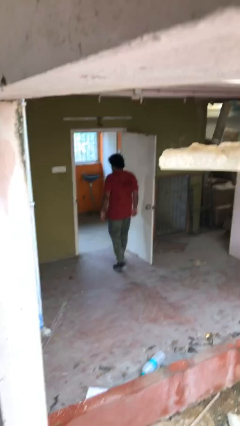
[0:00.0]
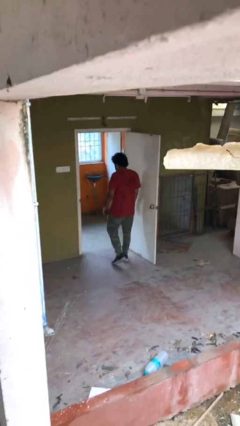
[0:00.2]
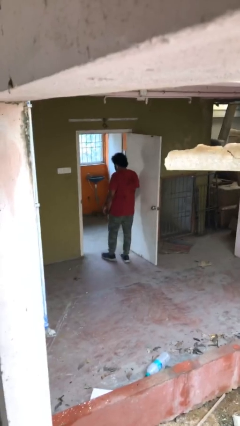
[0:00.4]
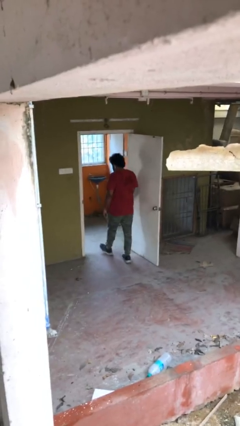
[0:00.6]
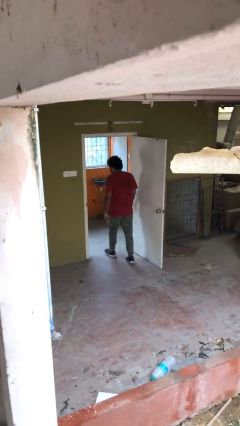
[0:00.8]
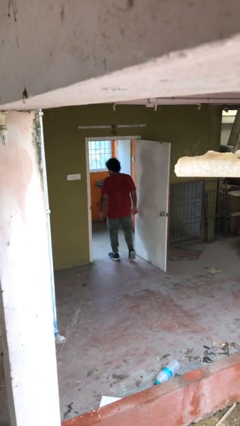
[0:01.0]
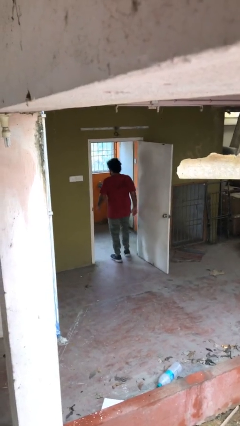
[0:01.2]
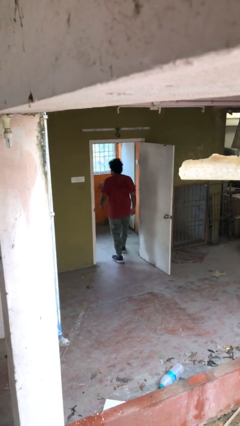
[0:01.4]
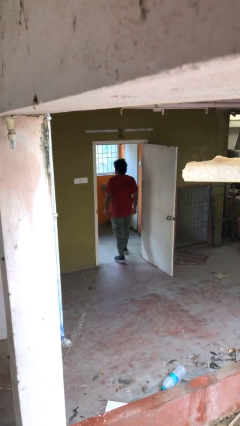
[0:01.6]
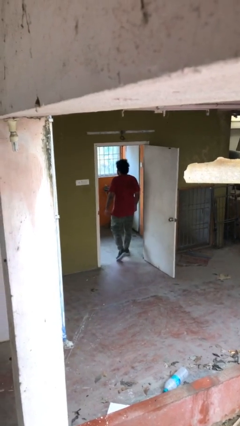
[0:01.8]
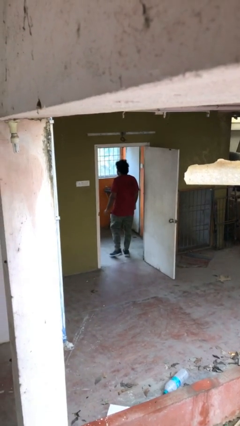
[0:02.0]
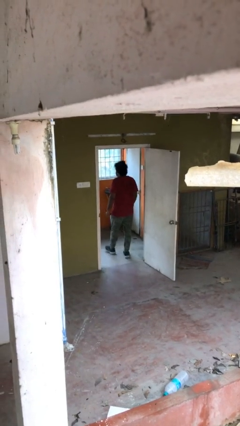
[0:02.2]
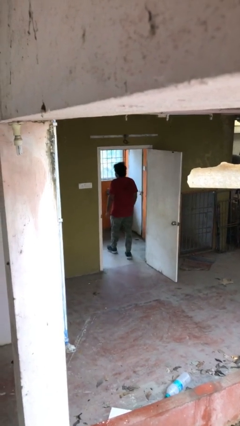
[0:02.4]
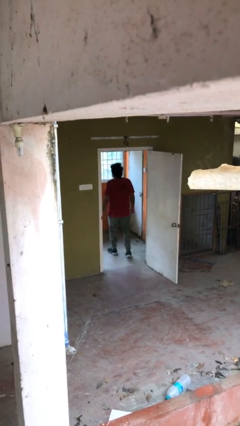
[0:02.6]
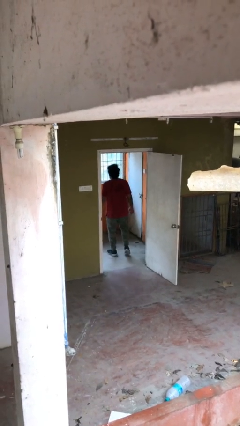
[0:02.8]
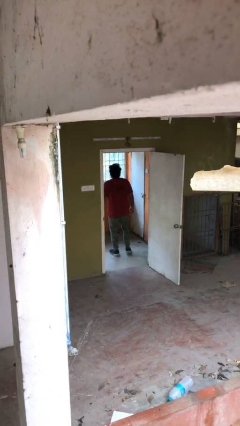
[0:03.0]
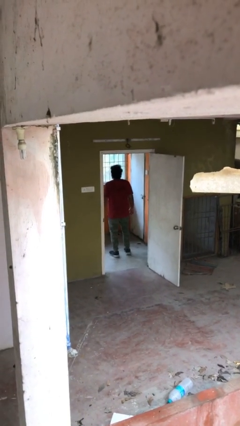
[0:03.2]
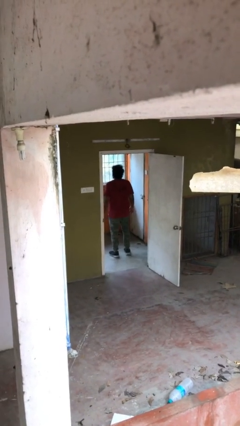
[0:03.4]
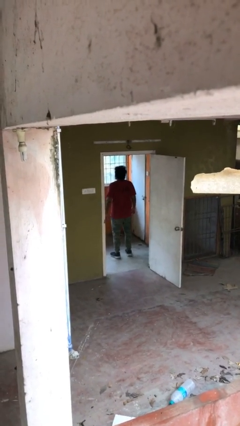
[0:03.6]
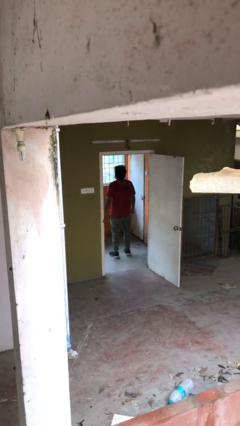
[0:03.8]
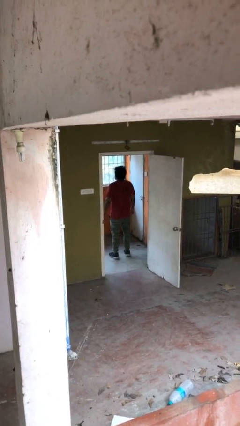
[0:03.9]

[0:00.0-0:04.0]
person exits scene through structure

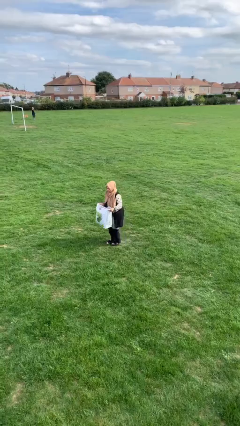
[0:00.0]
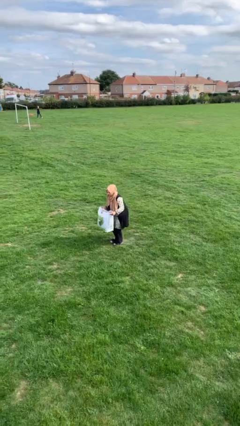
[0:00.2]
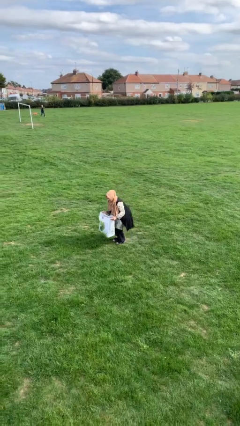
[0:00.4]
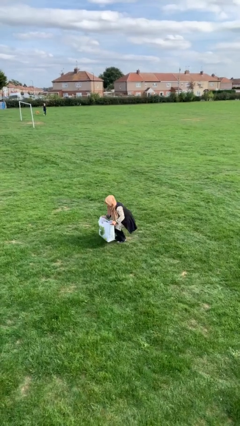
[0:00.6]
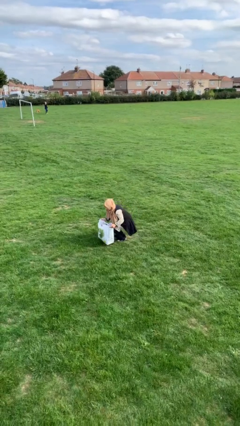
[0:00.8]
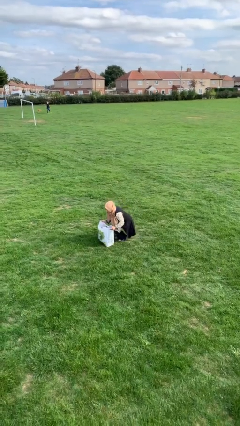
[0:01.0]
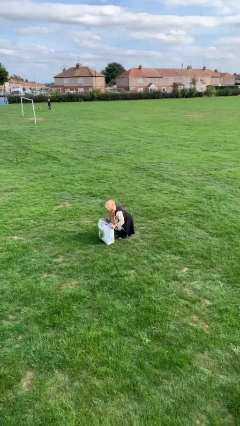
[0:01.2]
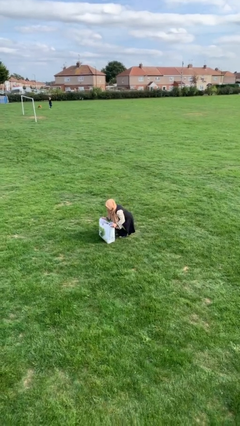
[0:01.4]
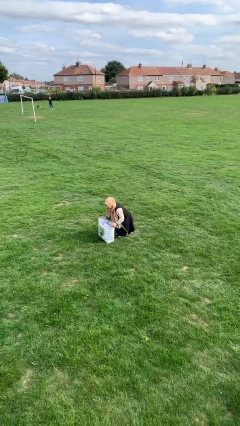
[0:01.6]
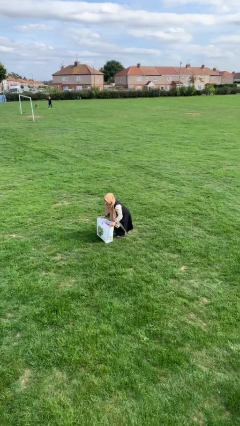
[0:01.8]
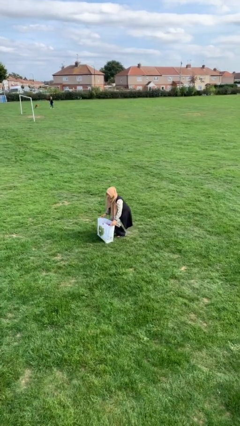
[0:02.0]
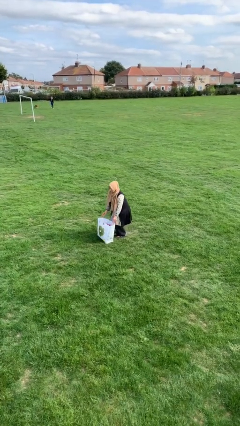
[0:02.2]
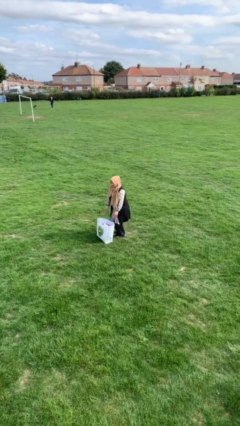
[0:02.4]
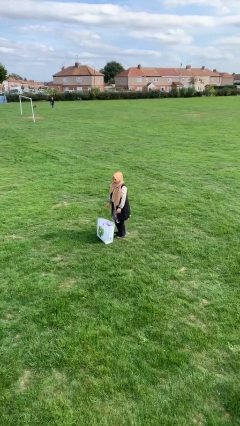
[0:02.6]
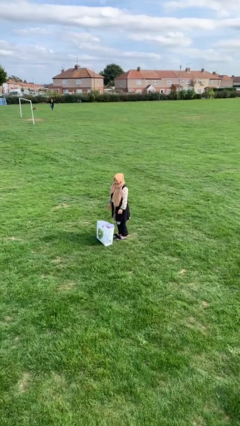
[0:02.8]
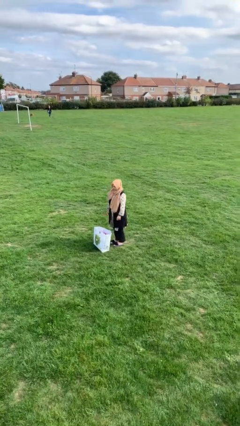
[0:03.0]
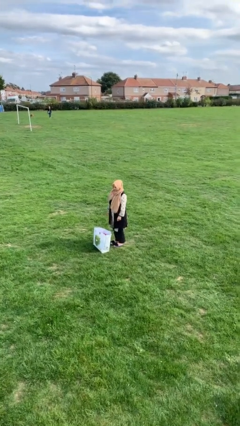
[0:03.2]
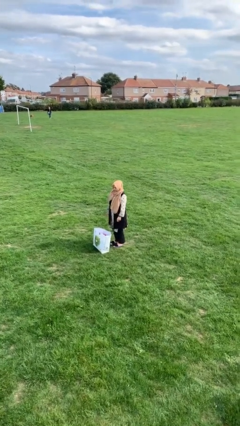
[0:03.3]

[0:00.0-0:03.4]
person puts down object on floor

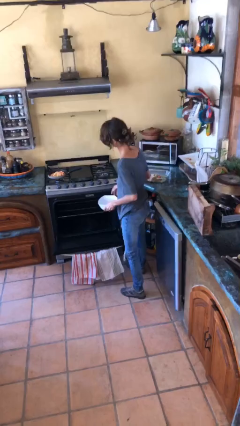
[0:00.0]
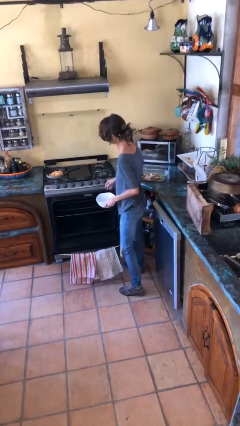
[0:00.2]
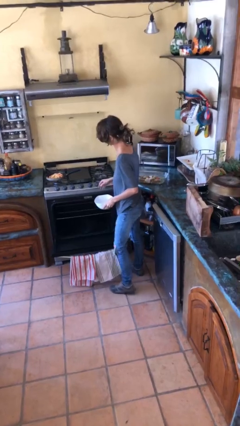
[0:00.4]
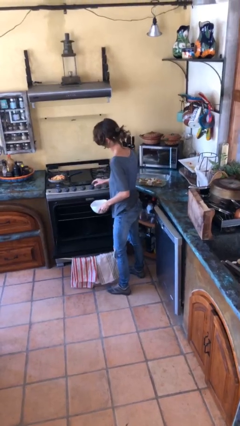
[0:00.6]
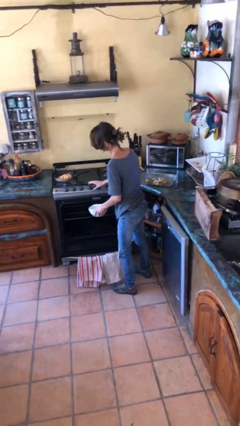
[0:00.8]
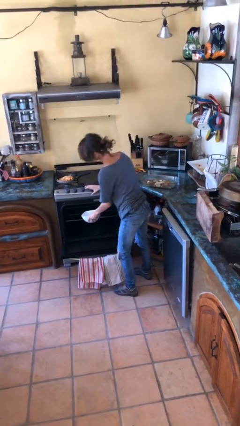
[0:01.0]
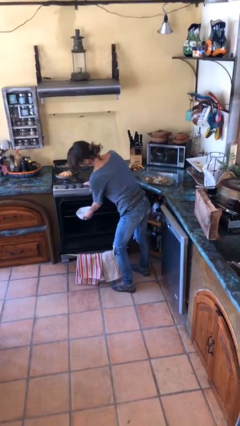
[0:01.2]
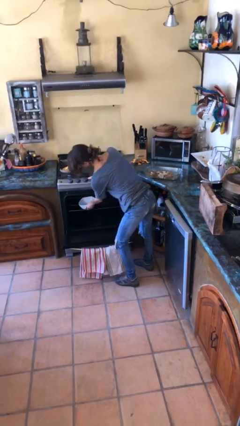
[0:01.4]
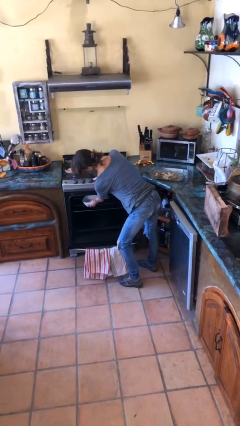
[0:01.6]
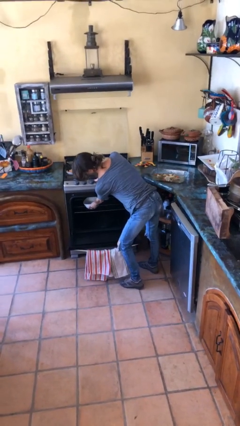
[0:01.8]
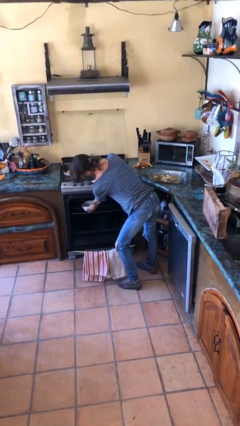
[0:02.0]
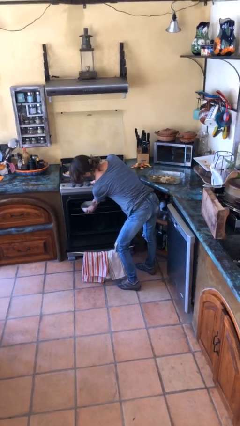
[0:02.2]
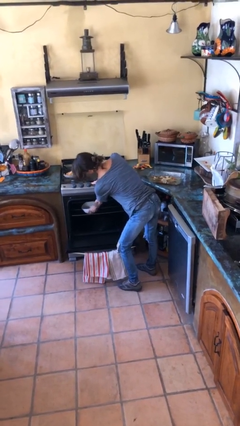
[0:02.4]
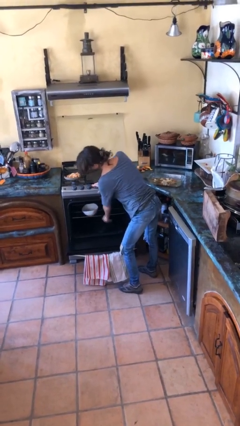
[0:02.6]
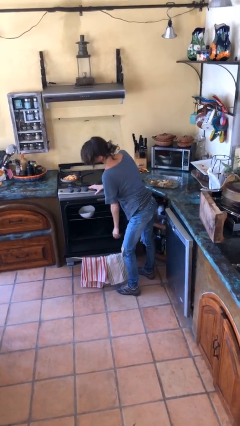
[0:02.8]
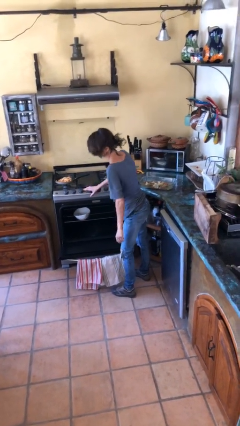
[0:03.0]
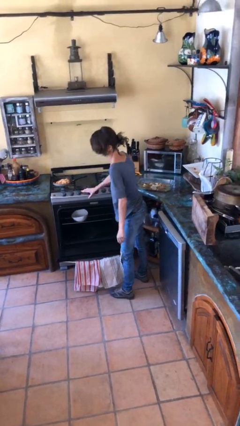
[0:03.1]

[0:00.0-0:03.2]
person puts object into oven

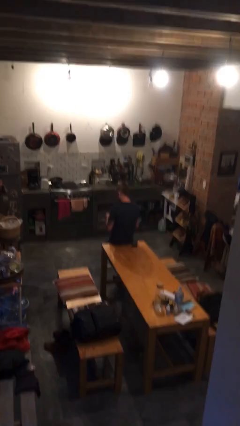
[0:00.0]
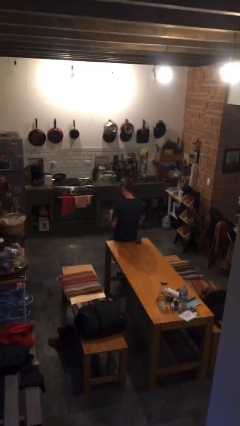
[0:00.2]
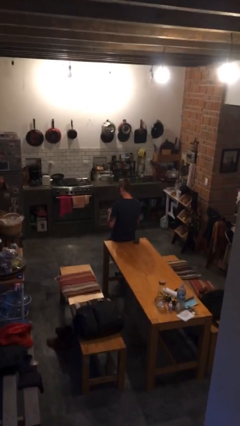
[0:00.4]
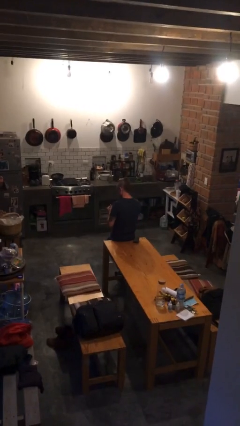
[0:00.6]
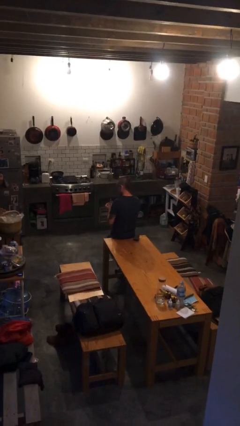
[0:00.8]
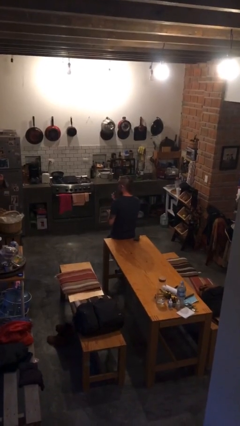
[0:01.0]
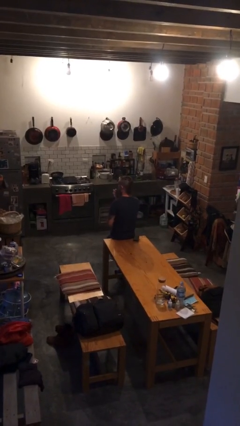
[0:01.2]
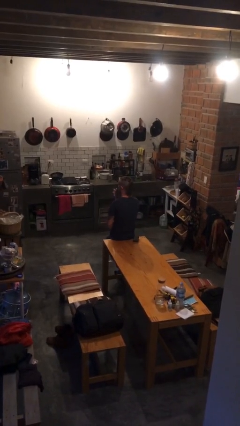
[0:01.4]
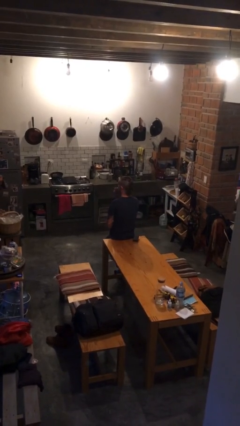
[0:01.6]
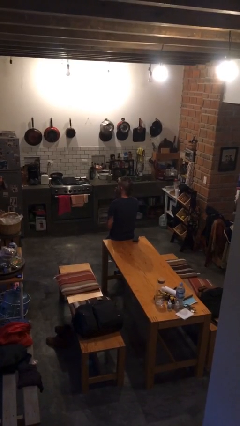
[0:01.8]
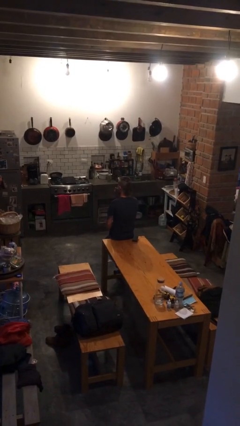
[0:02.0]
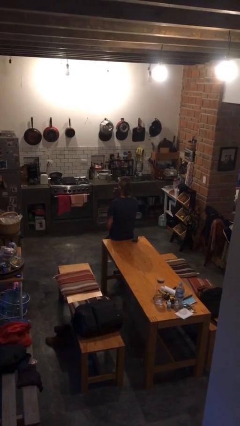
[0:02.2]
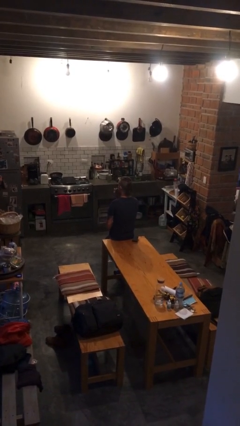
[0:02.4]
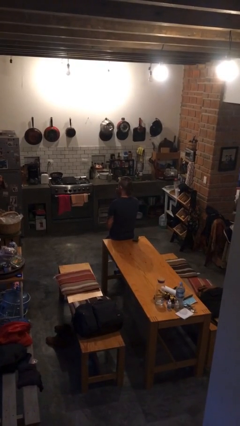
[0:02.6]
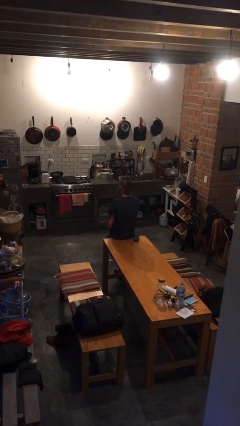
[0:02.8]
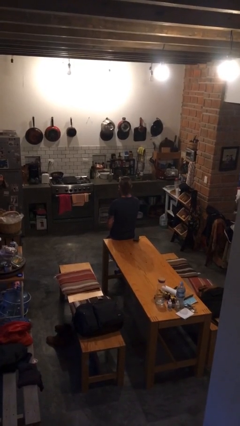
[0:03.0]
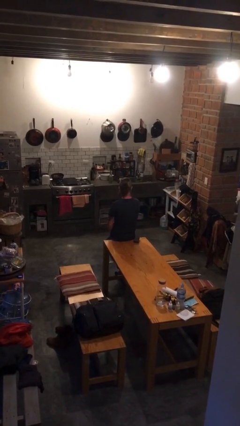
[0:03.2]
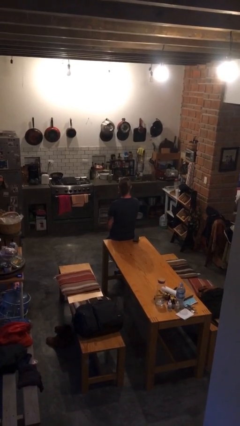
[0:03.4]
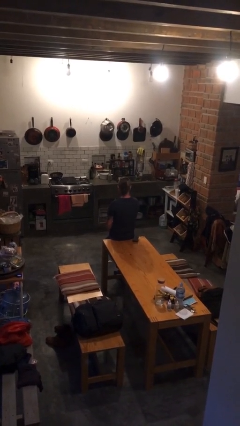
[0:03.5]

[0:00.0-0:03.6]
person applies lip makeup

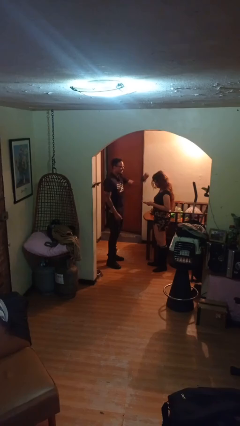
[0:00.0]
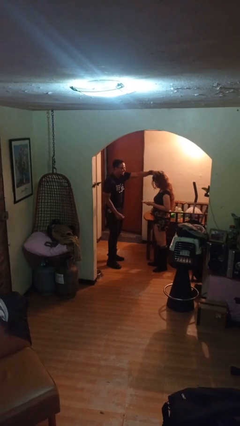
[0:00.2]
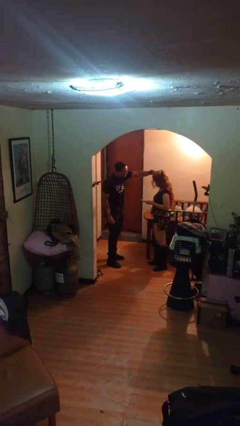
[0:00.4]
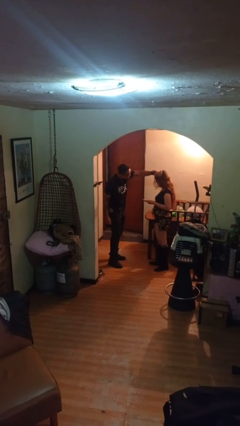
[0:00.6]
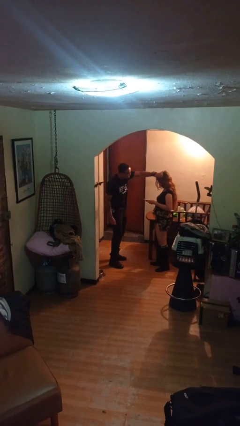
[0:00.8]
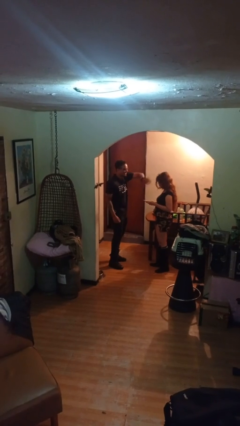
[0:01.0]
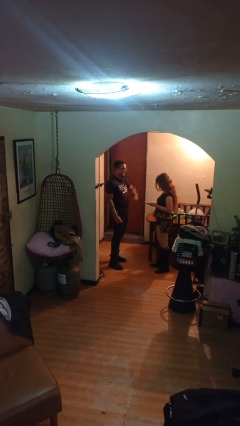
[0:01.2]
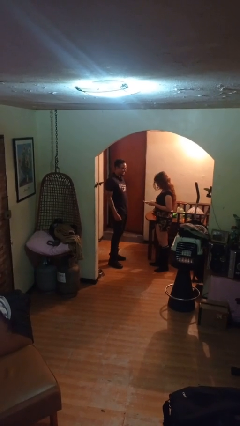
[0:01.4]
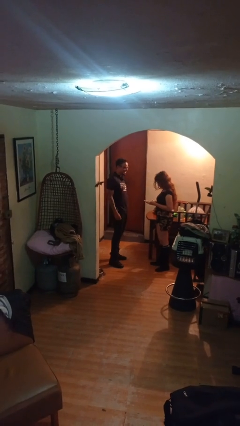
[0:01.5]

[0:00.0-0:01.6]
person picks up object from table

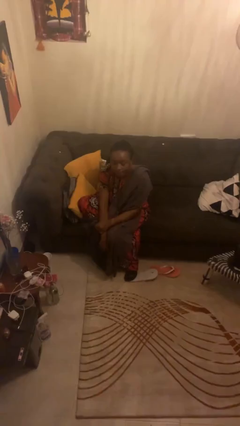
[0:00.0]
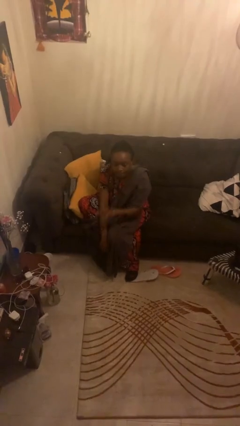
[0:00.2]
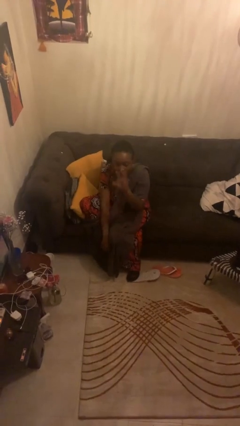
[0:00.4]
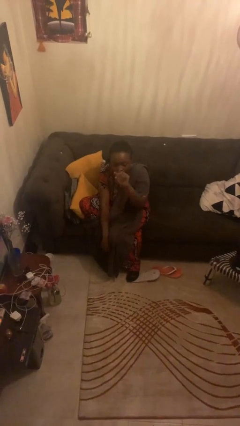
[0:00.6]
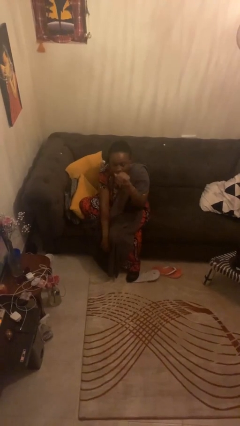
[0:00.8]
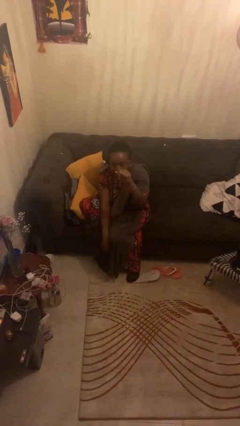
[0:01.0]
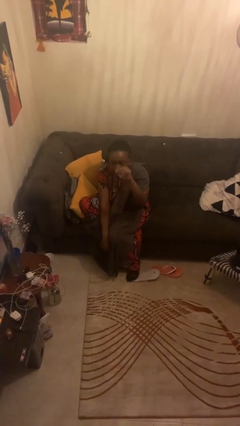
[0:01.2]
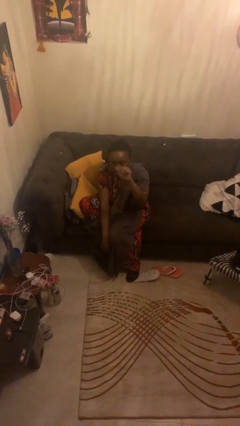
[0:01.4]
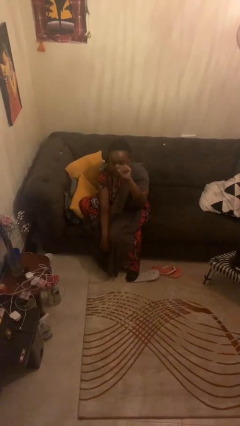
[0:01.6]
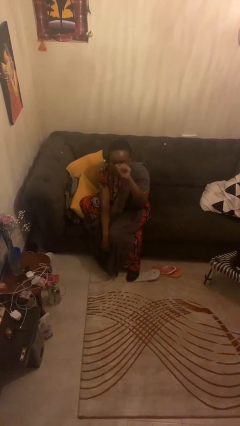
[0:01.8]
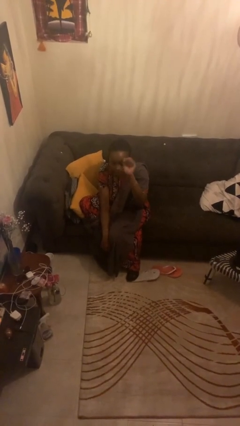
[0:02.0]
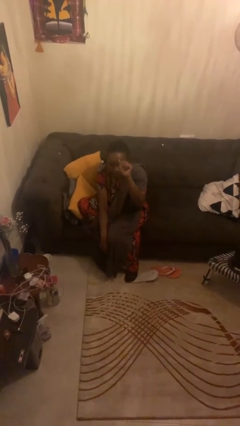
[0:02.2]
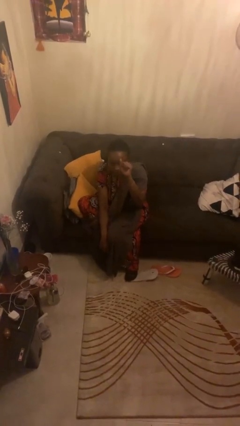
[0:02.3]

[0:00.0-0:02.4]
person gestures come here
